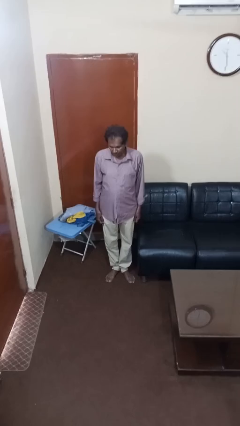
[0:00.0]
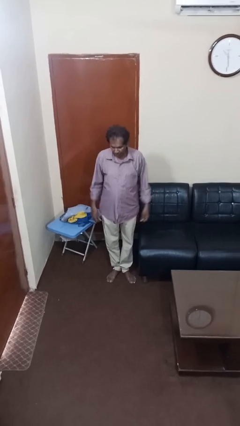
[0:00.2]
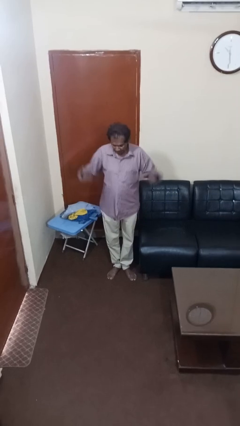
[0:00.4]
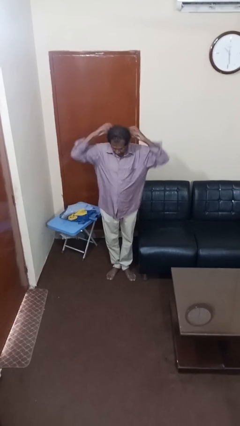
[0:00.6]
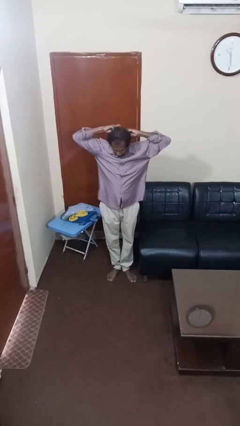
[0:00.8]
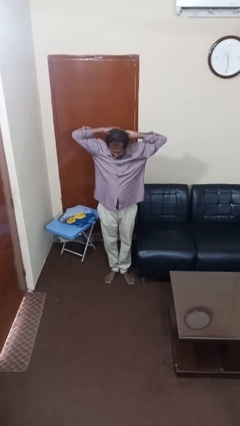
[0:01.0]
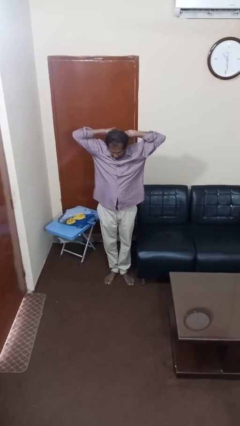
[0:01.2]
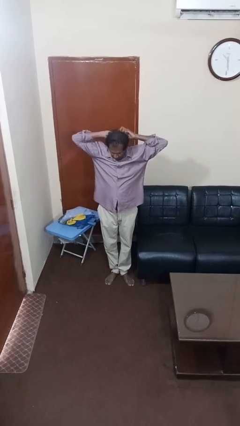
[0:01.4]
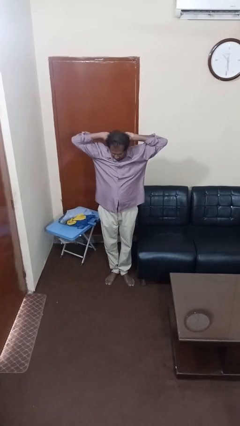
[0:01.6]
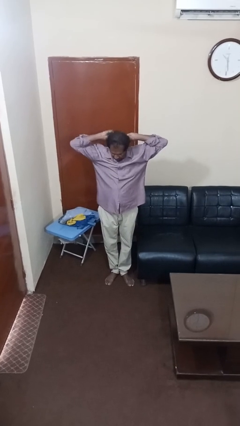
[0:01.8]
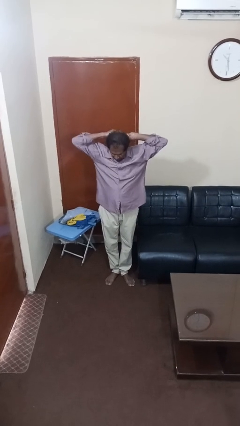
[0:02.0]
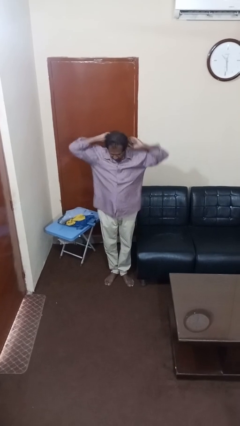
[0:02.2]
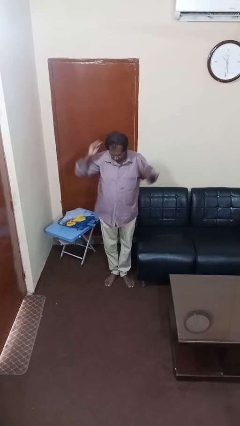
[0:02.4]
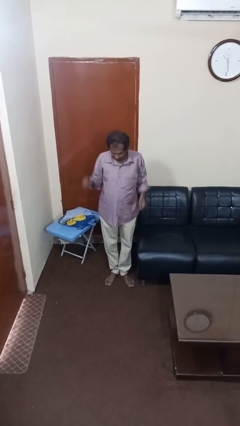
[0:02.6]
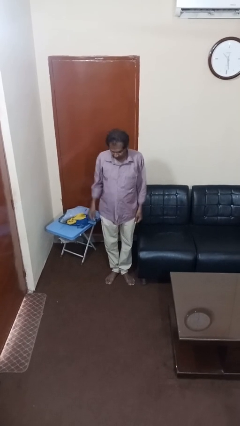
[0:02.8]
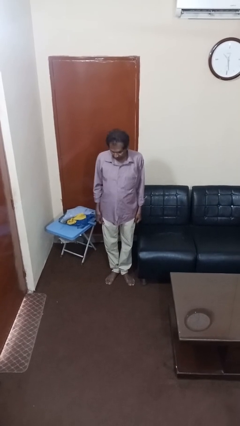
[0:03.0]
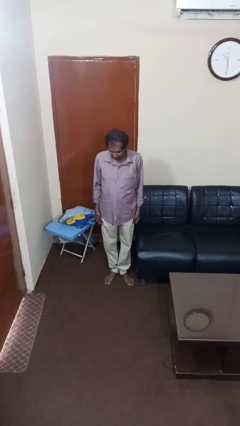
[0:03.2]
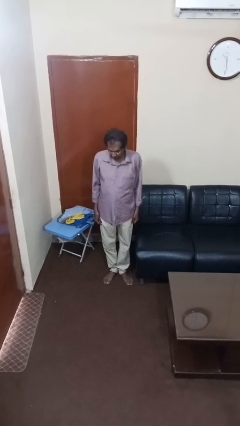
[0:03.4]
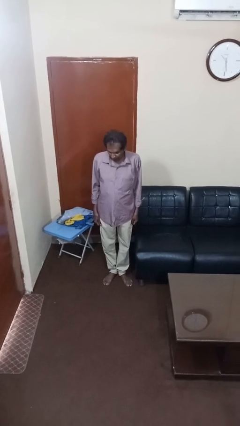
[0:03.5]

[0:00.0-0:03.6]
person puts hair in ponytail

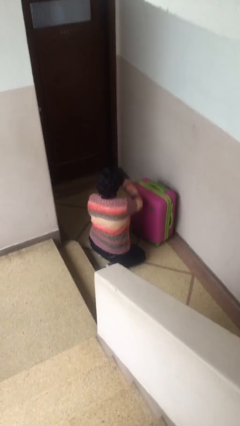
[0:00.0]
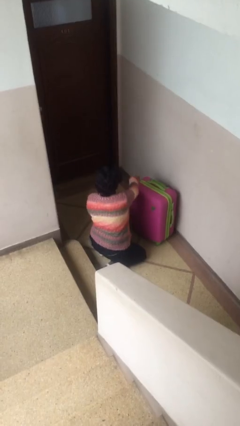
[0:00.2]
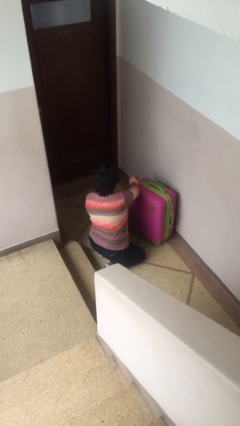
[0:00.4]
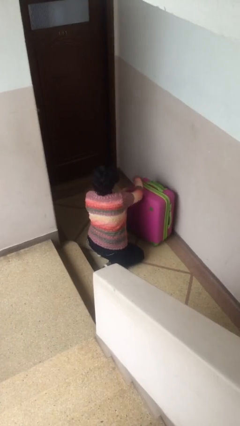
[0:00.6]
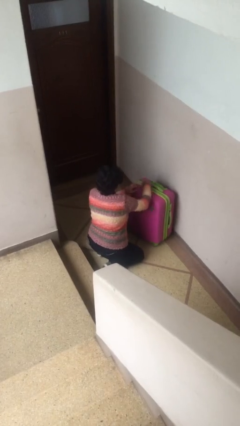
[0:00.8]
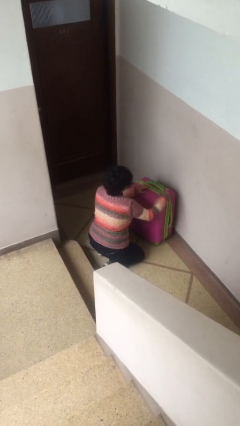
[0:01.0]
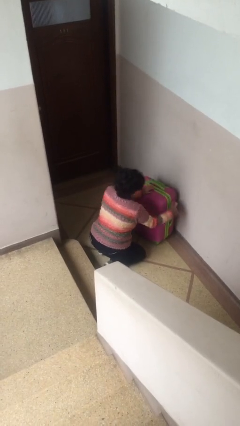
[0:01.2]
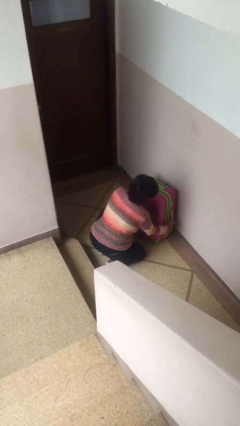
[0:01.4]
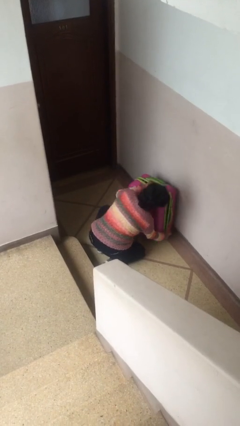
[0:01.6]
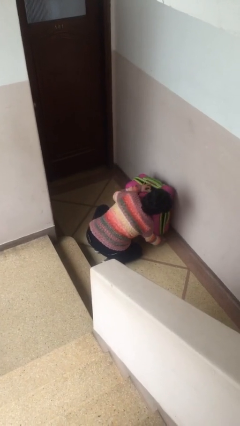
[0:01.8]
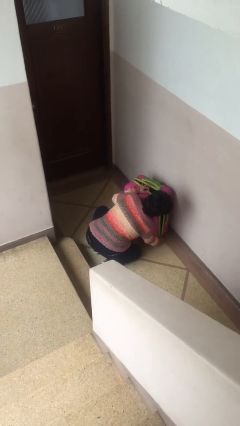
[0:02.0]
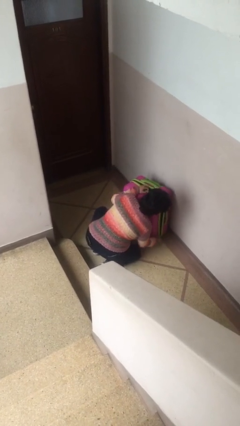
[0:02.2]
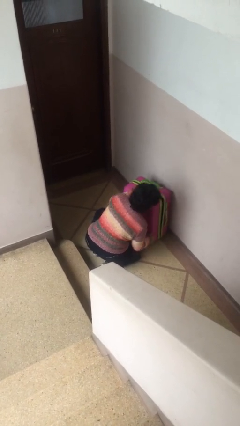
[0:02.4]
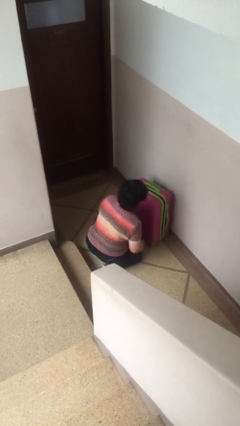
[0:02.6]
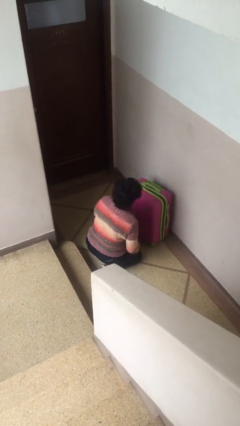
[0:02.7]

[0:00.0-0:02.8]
person opens suitcase

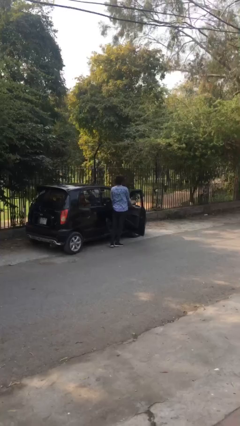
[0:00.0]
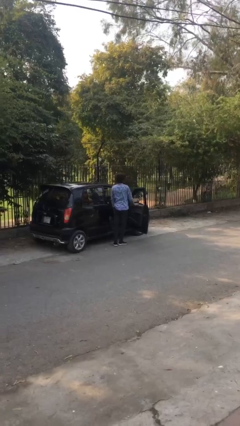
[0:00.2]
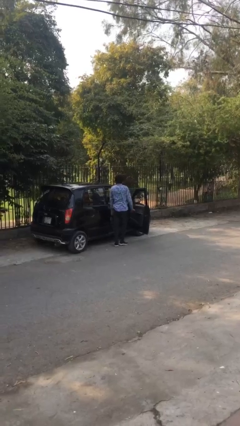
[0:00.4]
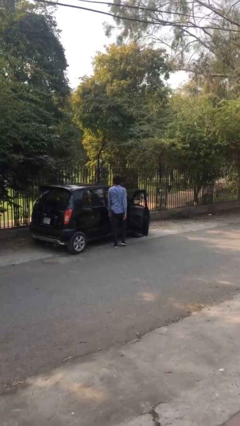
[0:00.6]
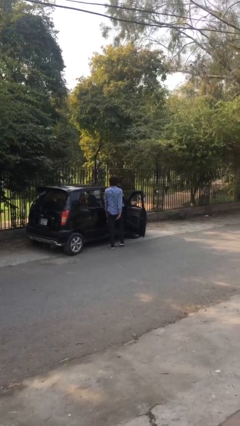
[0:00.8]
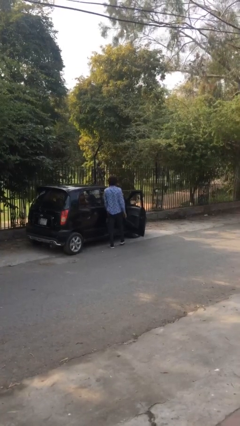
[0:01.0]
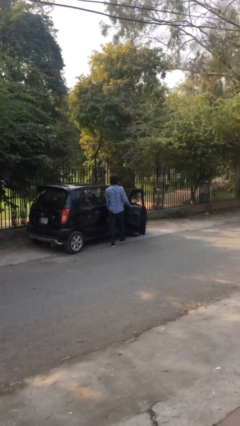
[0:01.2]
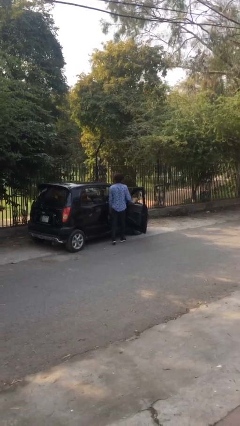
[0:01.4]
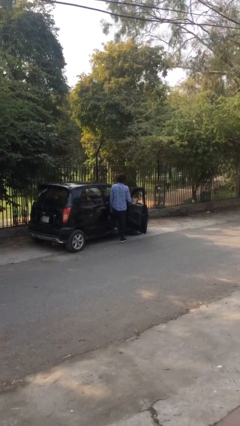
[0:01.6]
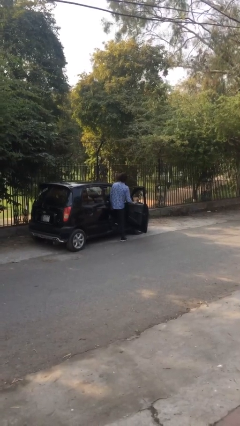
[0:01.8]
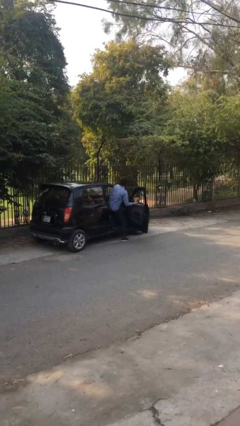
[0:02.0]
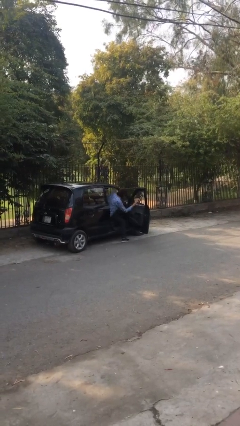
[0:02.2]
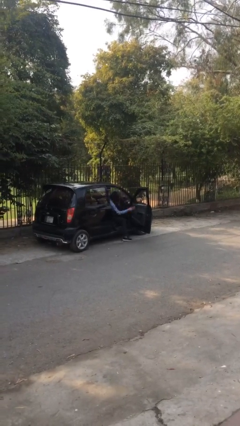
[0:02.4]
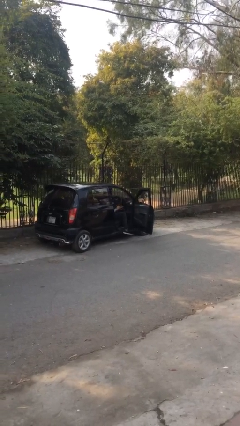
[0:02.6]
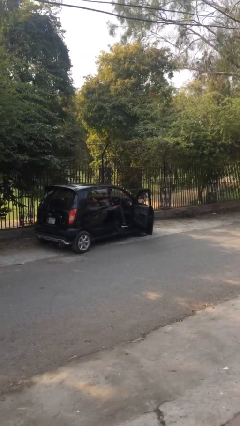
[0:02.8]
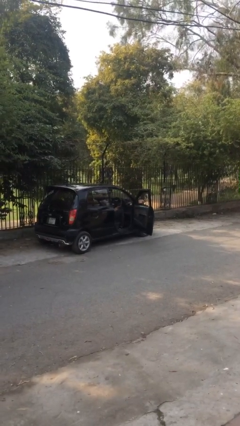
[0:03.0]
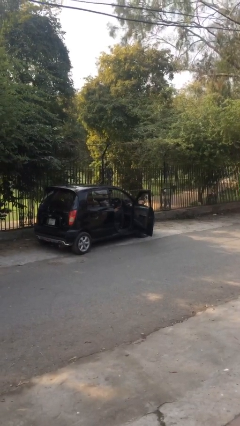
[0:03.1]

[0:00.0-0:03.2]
person enters car

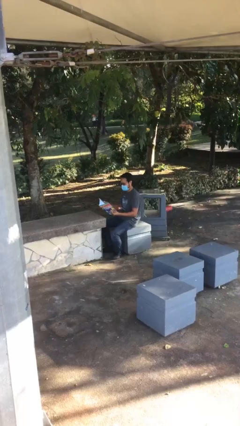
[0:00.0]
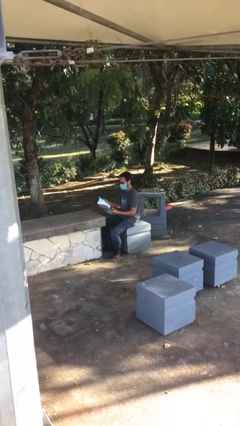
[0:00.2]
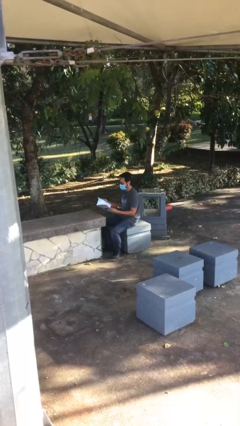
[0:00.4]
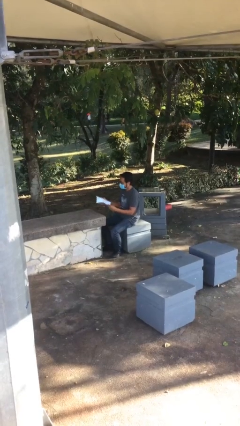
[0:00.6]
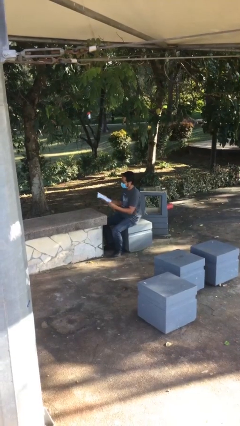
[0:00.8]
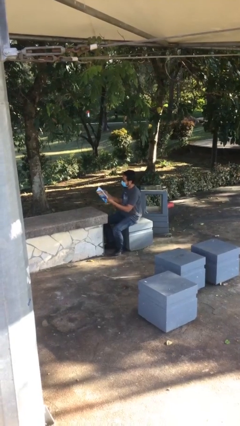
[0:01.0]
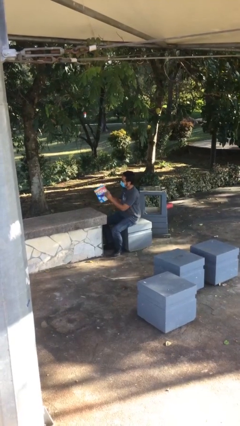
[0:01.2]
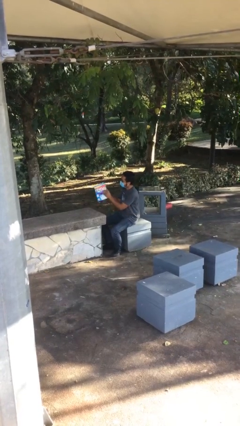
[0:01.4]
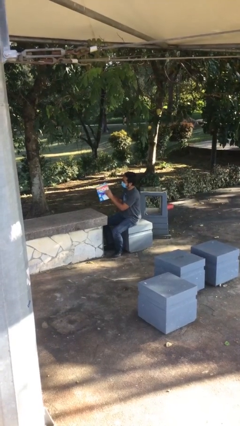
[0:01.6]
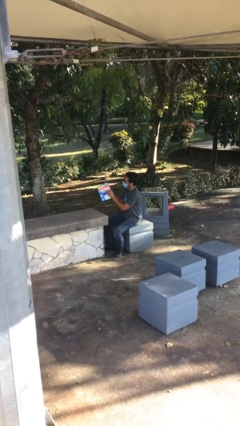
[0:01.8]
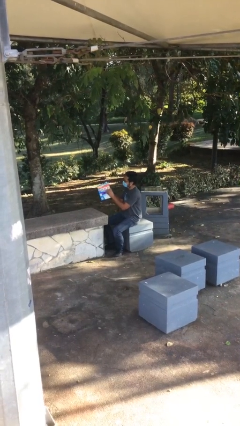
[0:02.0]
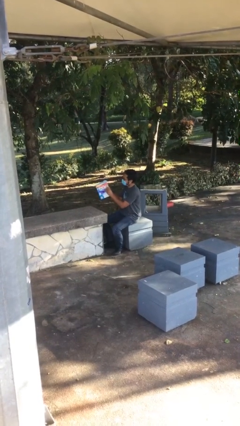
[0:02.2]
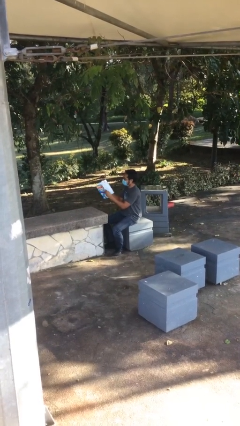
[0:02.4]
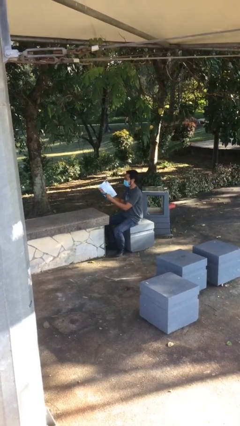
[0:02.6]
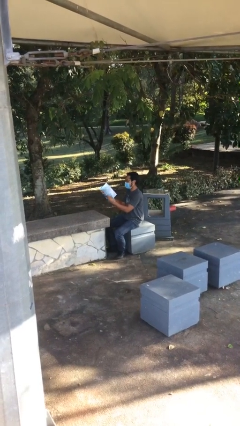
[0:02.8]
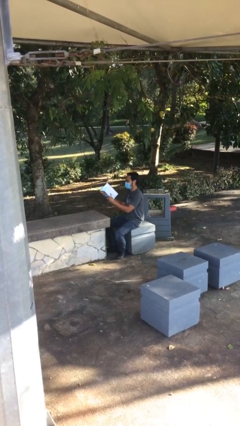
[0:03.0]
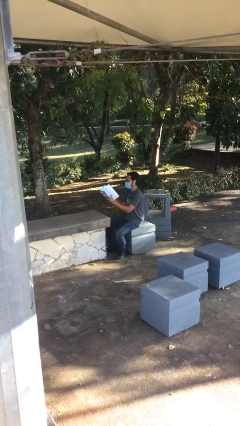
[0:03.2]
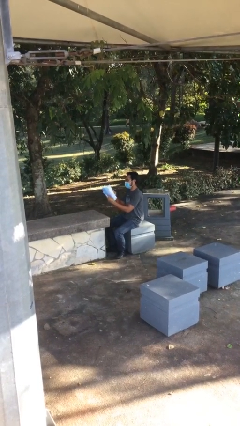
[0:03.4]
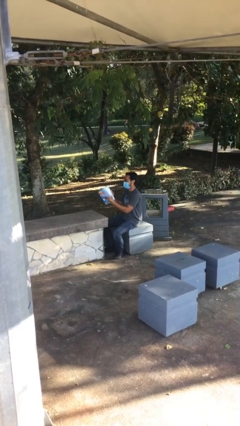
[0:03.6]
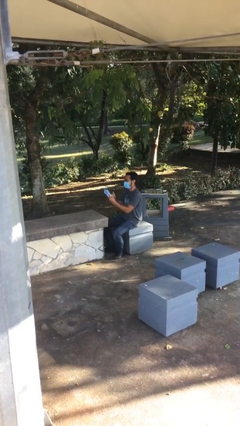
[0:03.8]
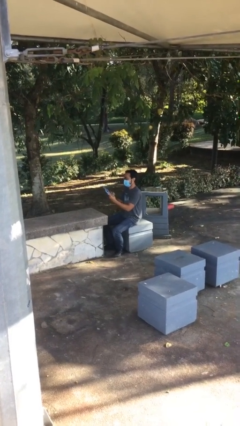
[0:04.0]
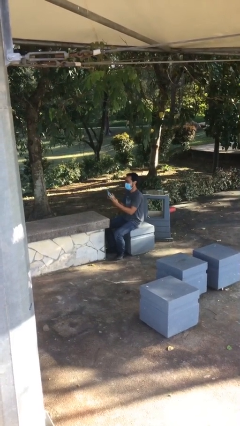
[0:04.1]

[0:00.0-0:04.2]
person reads document

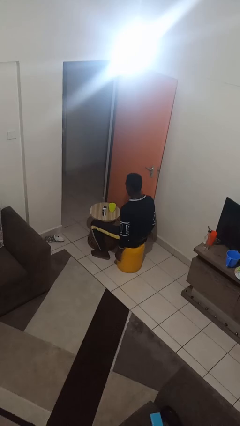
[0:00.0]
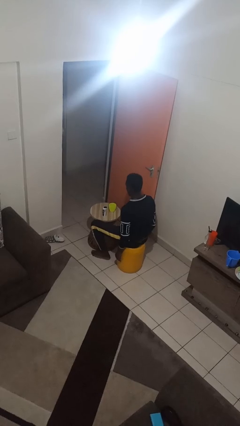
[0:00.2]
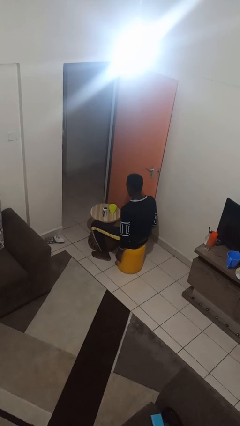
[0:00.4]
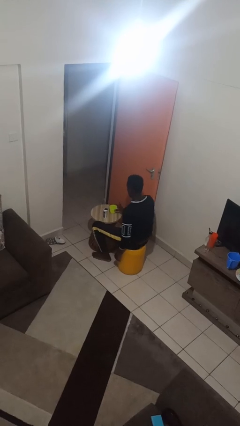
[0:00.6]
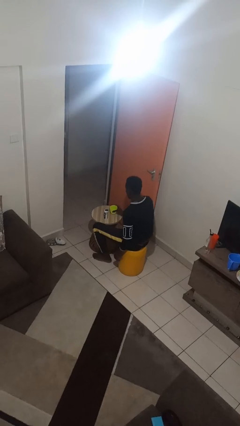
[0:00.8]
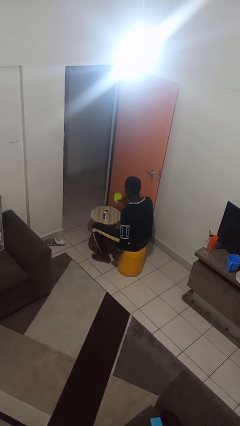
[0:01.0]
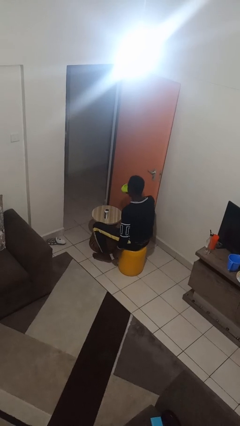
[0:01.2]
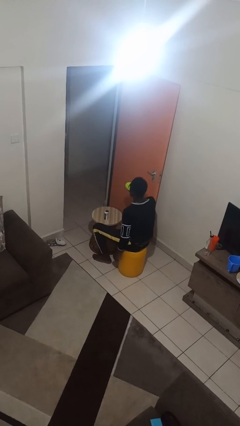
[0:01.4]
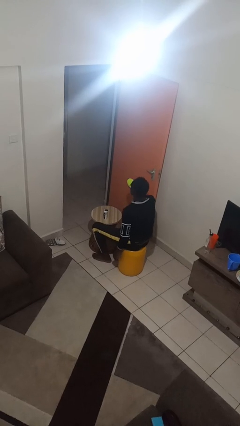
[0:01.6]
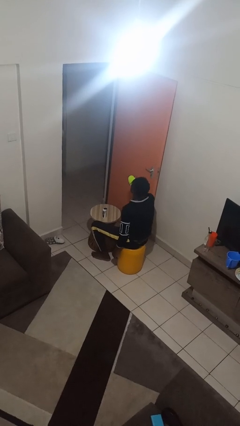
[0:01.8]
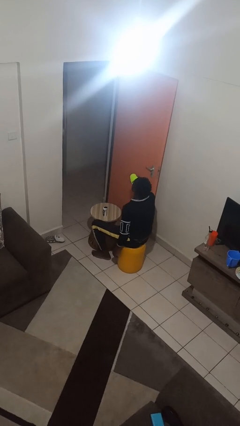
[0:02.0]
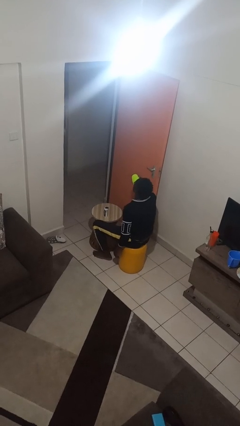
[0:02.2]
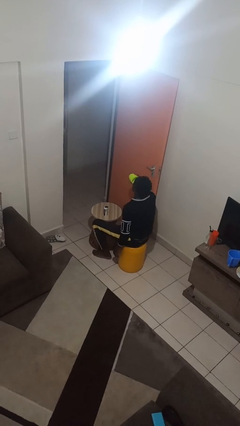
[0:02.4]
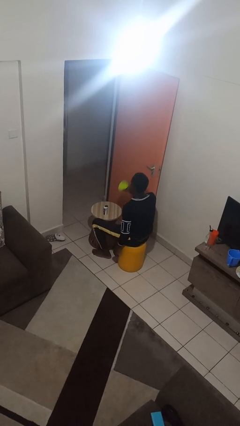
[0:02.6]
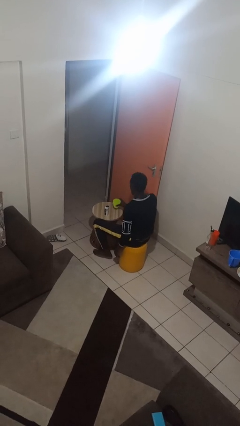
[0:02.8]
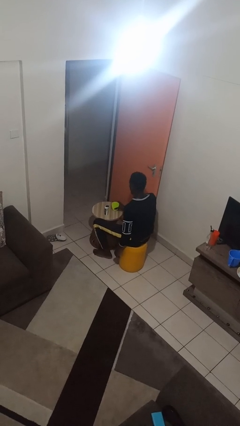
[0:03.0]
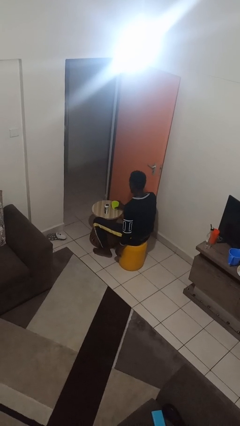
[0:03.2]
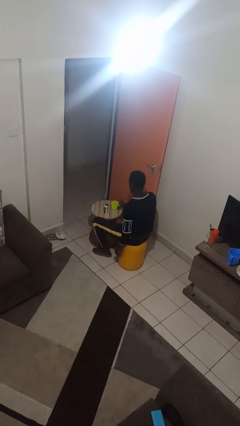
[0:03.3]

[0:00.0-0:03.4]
person drinks from cup

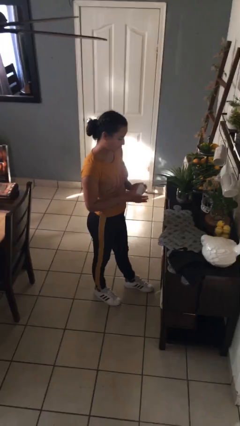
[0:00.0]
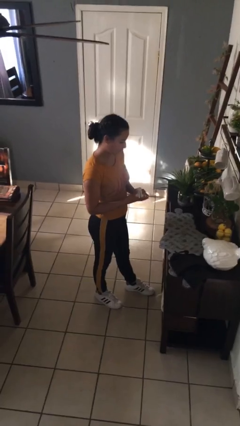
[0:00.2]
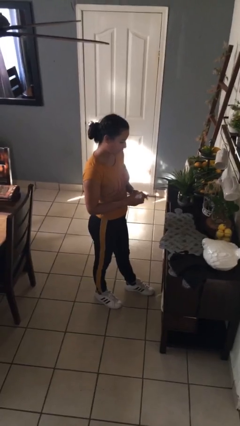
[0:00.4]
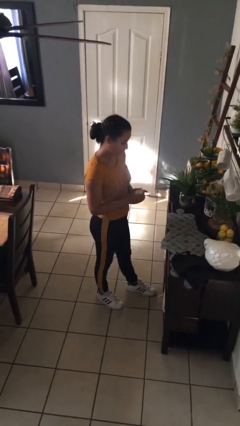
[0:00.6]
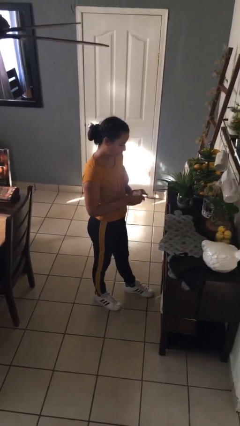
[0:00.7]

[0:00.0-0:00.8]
person crumples paper
